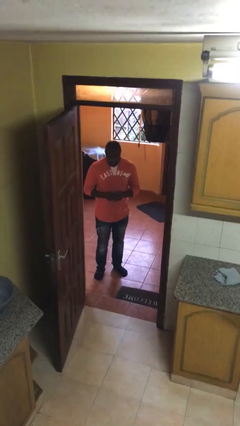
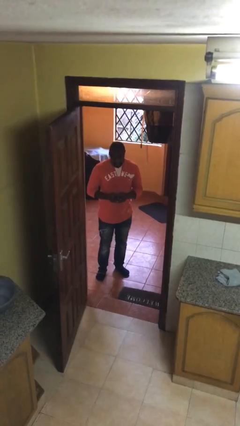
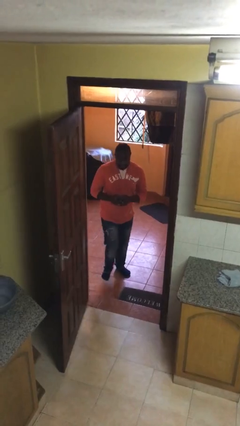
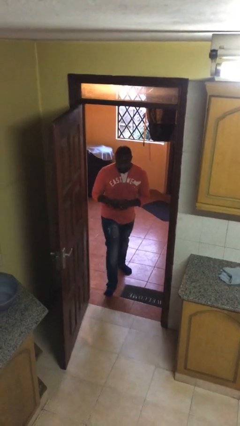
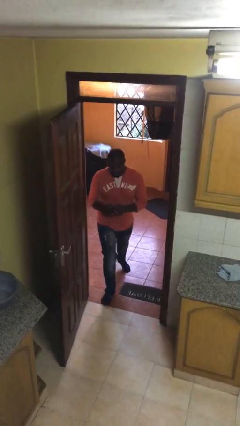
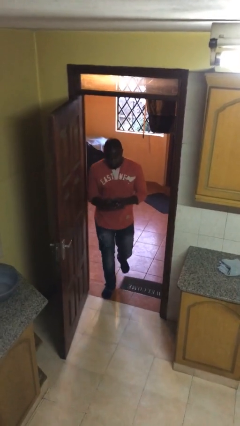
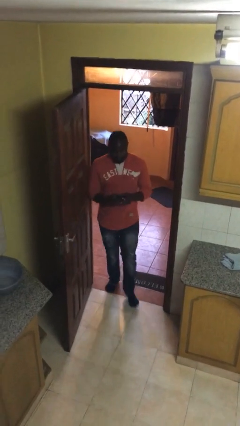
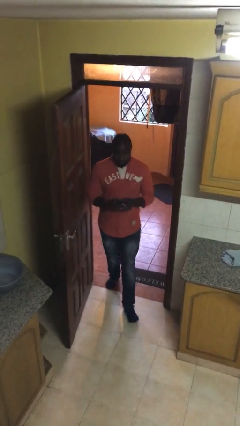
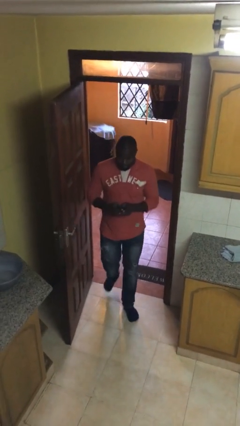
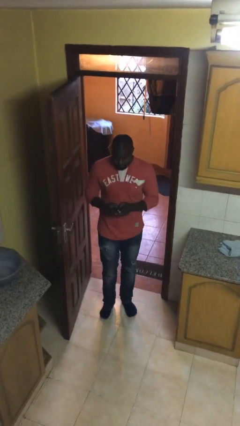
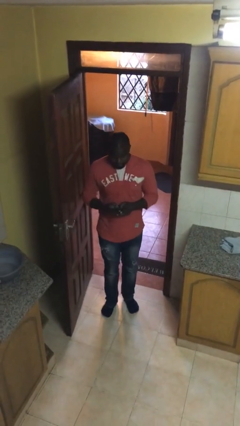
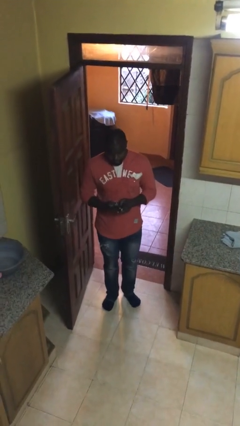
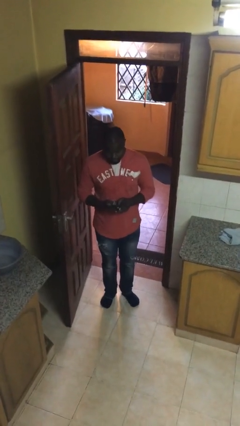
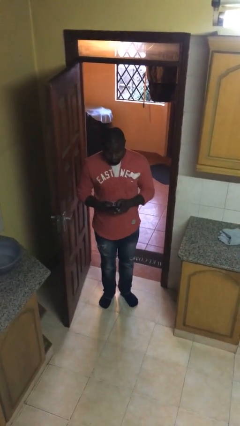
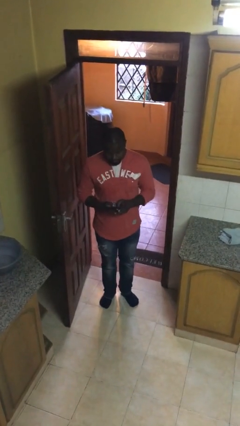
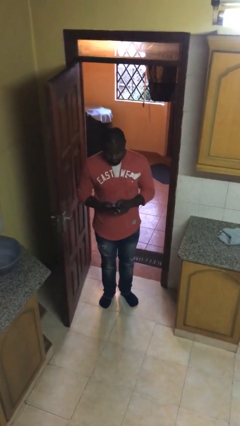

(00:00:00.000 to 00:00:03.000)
person enters scene through structure

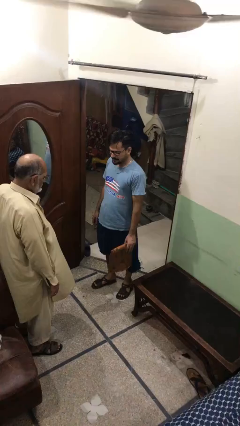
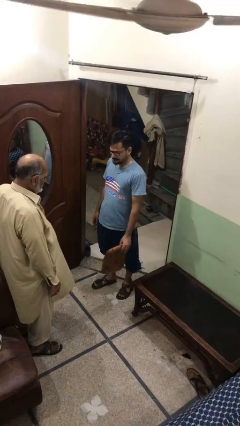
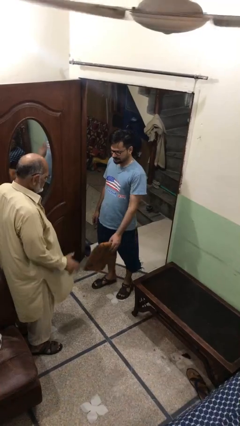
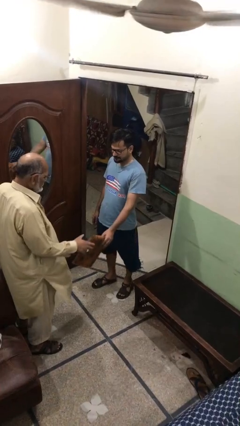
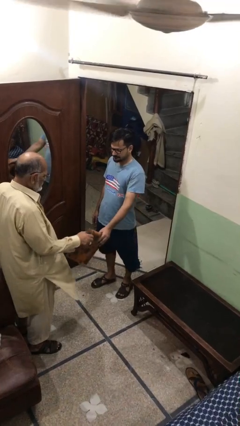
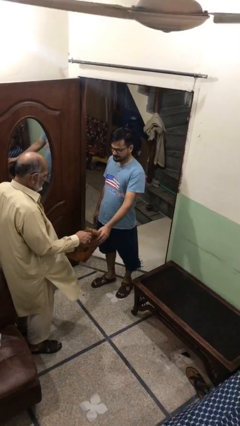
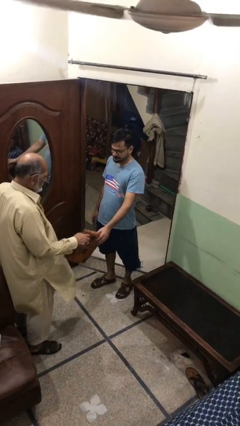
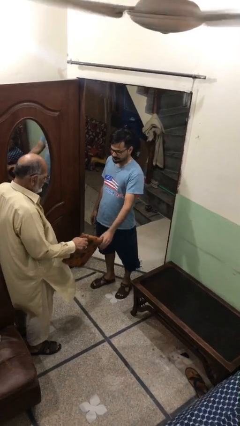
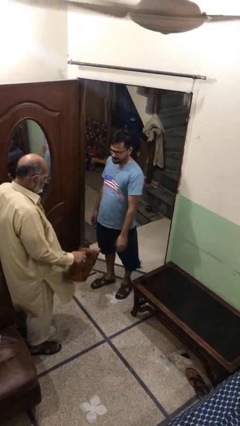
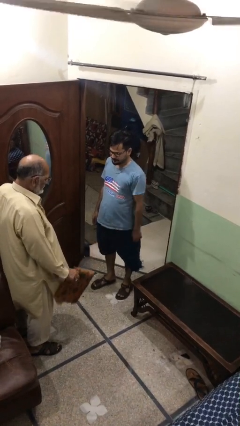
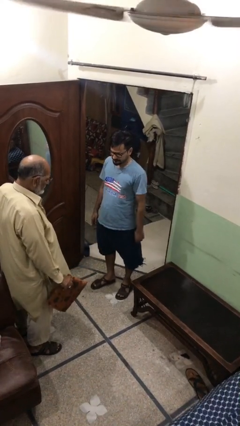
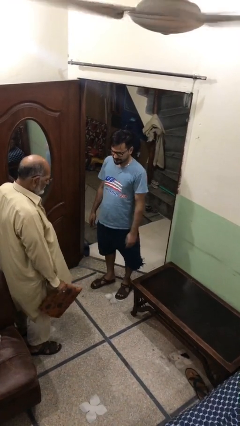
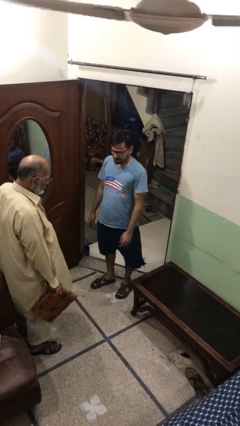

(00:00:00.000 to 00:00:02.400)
person transfers object to person

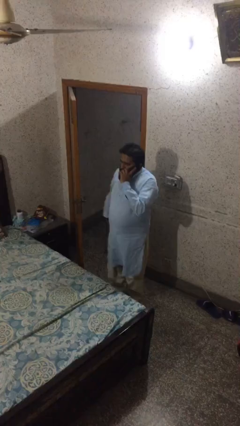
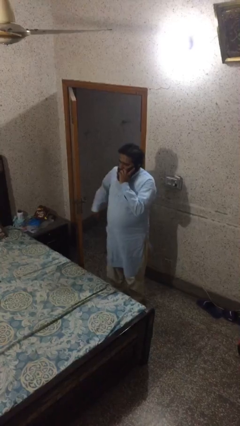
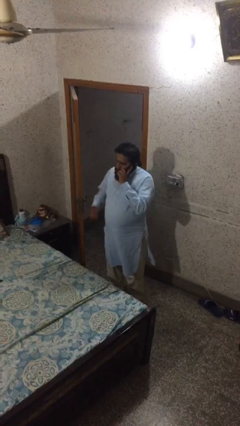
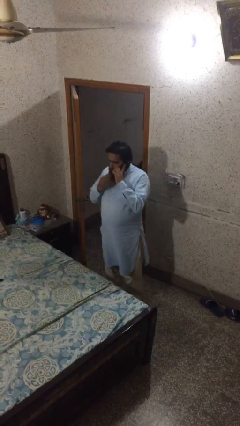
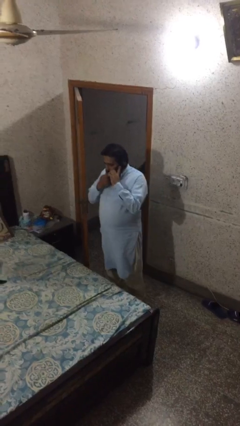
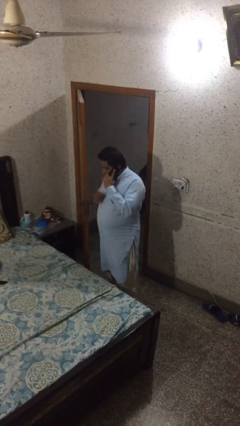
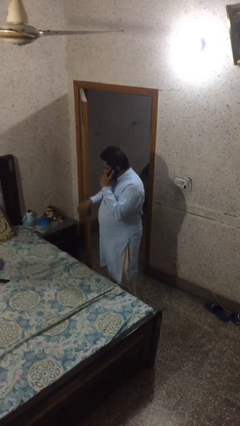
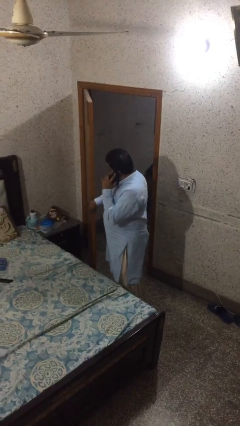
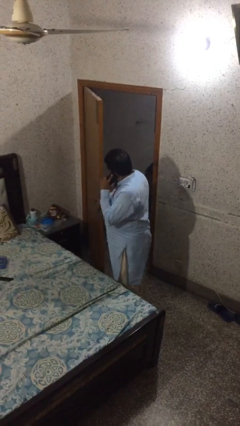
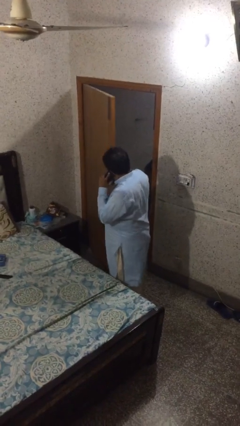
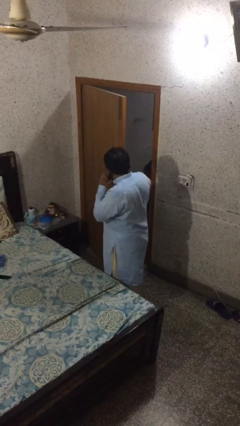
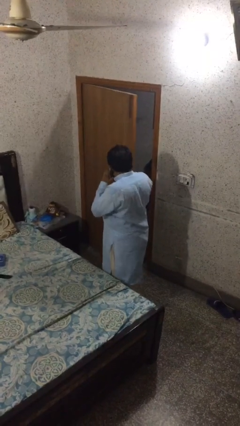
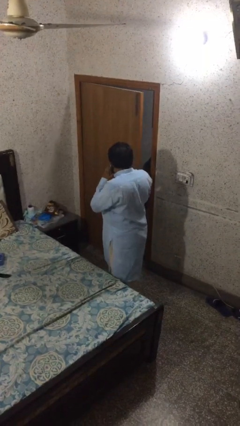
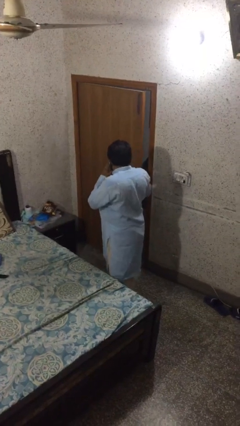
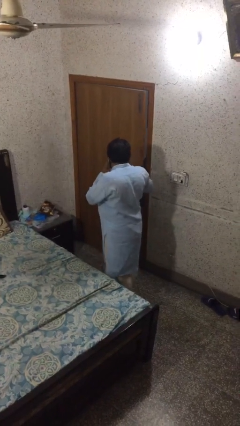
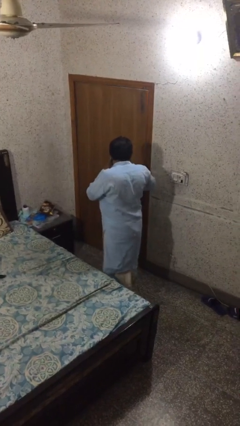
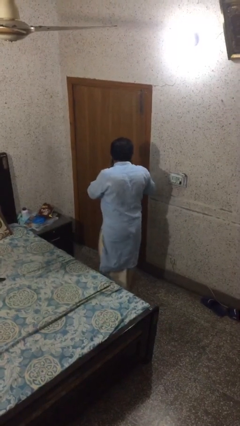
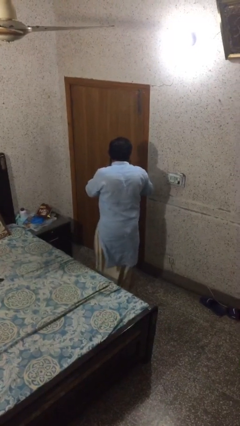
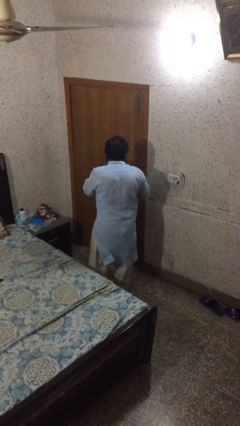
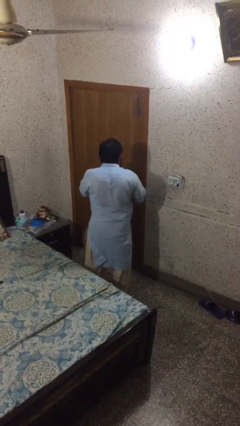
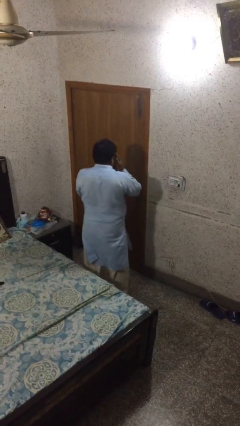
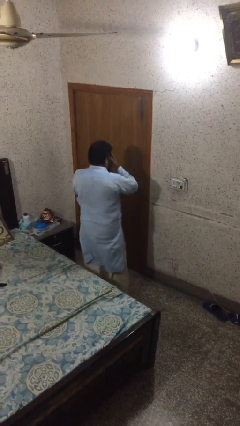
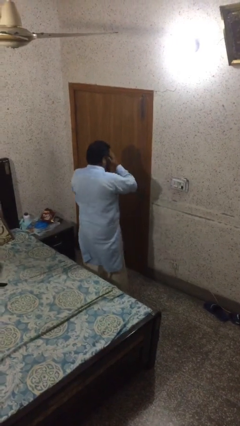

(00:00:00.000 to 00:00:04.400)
person closes facility door

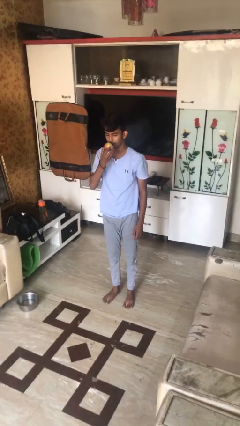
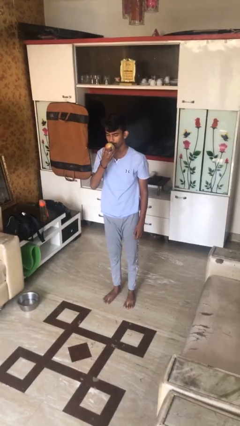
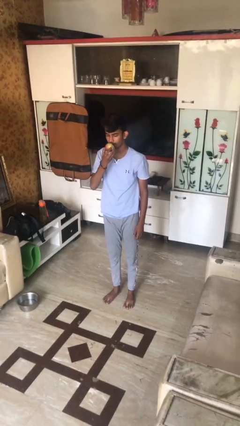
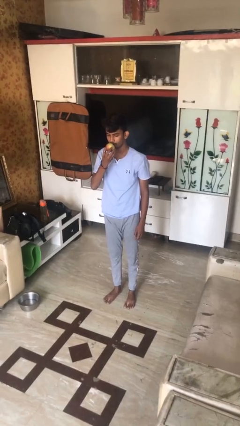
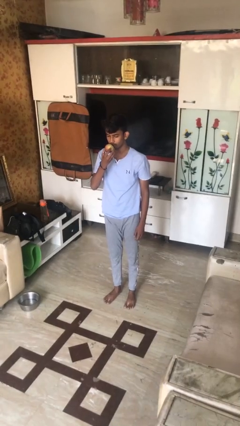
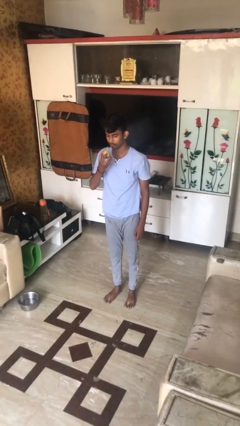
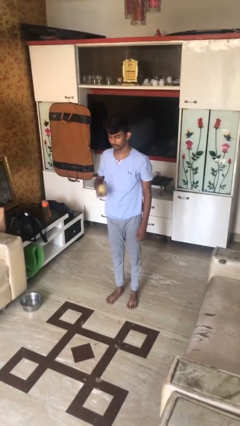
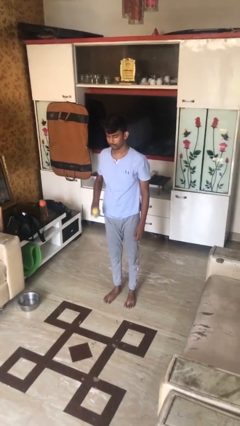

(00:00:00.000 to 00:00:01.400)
person eats apple

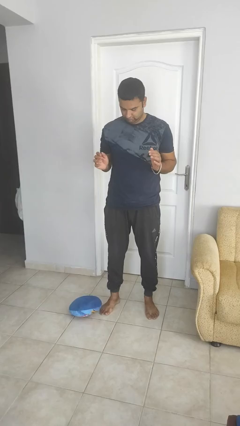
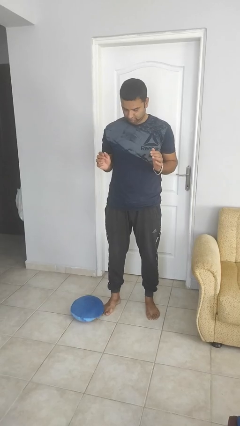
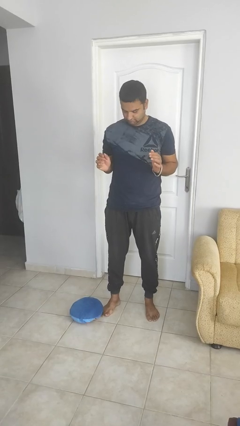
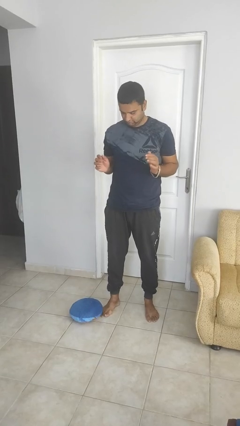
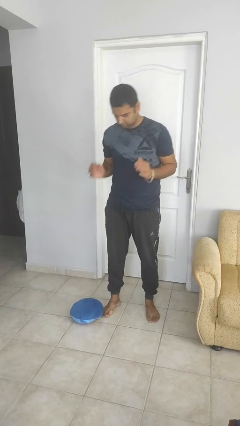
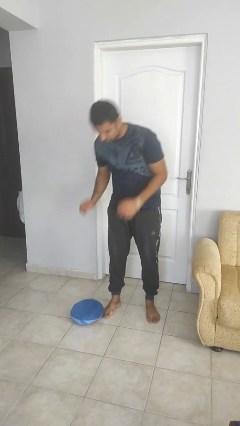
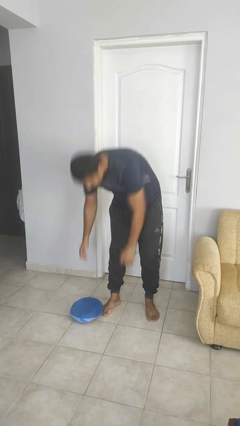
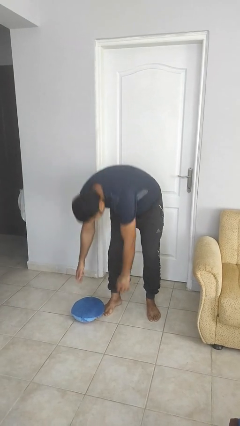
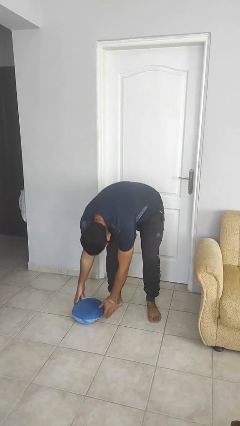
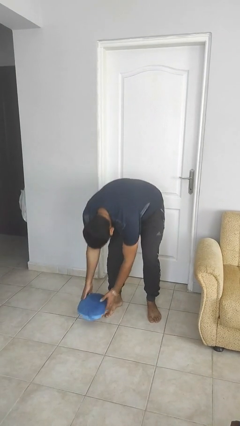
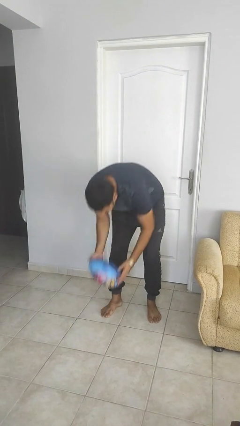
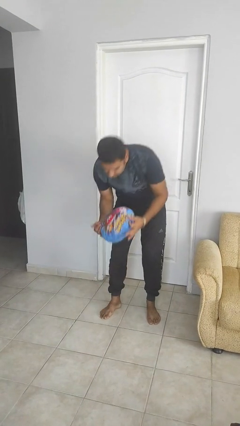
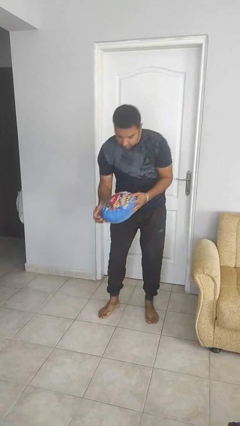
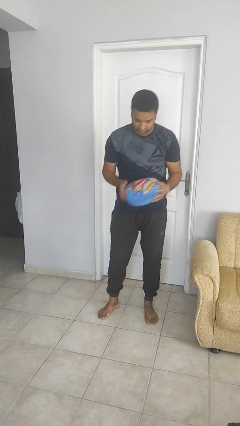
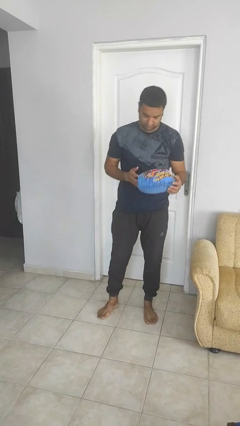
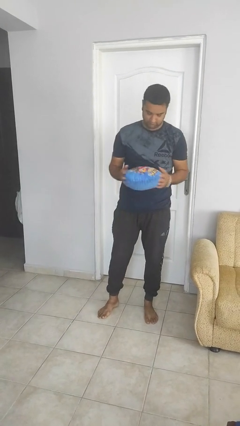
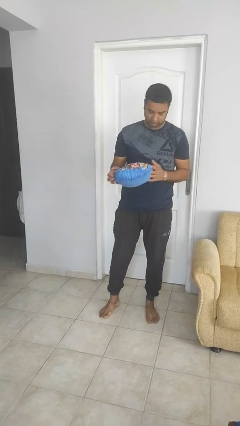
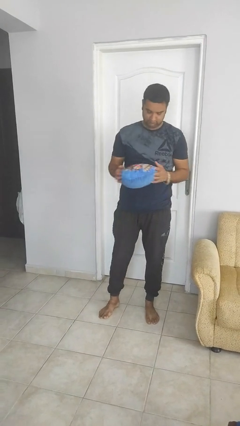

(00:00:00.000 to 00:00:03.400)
person picks up object from floor

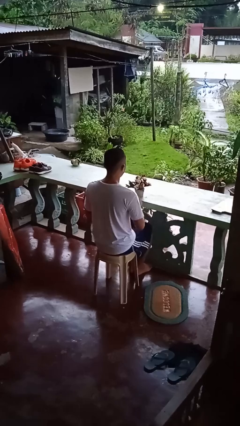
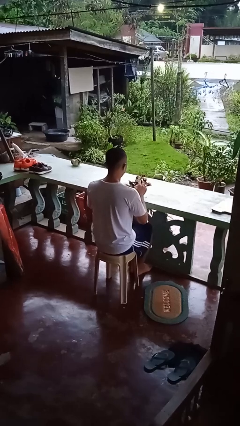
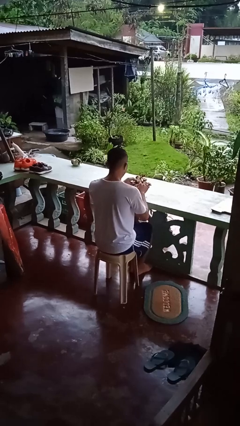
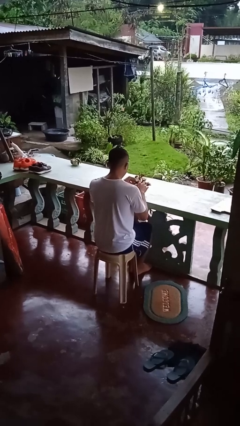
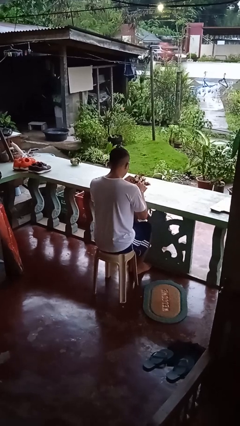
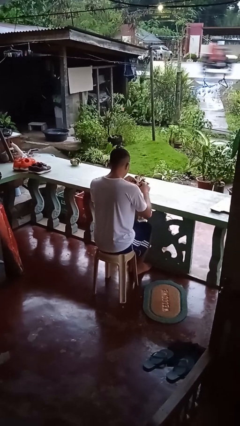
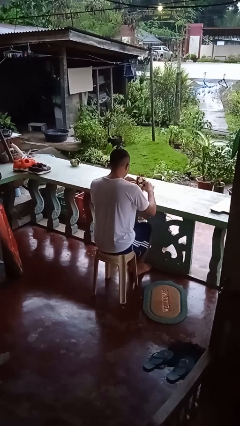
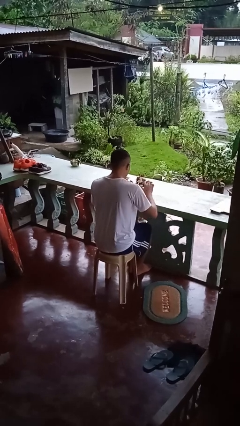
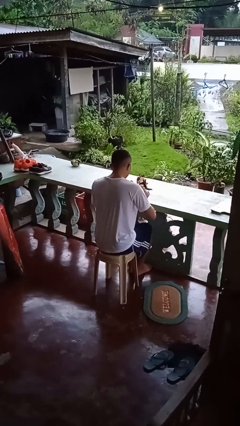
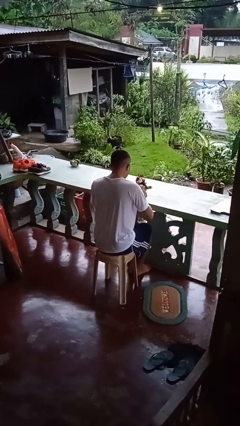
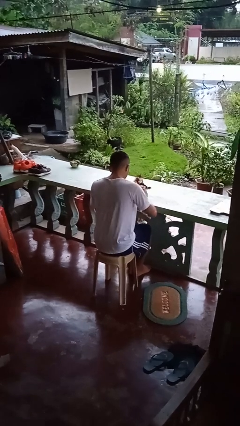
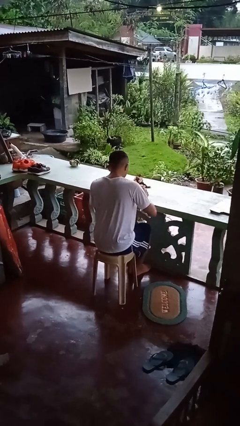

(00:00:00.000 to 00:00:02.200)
person arranges flowers in vase

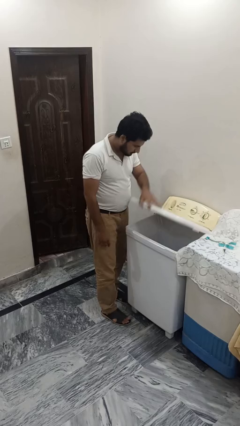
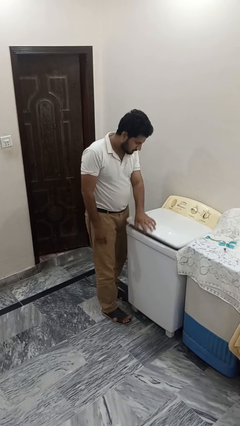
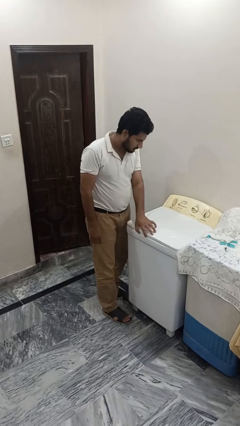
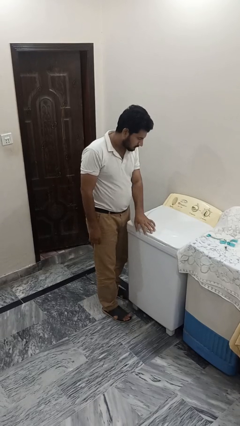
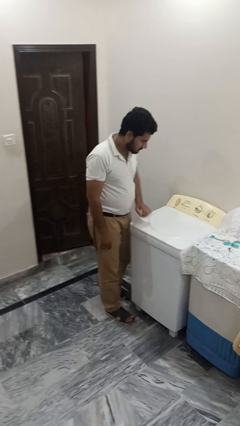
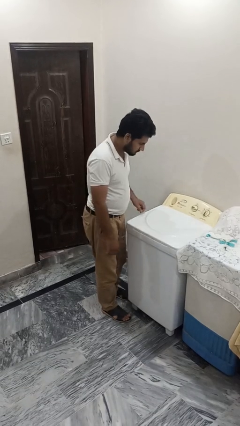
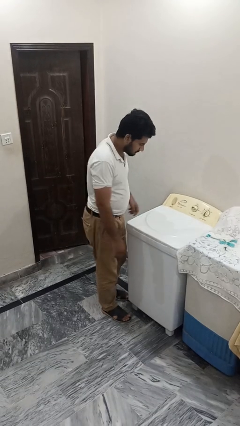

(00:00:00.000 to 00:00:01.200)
person closes clothes washer
